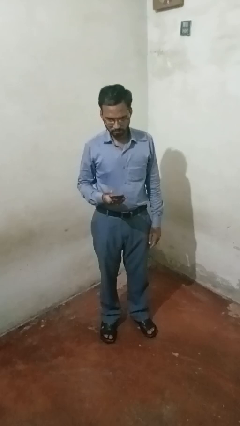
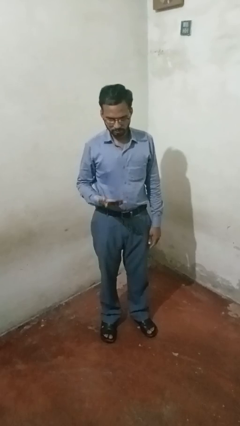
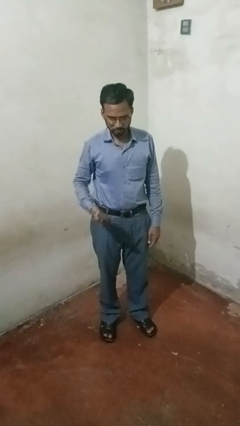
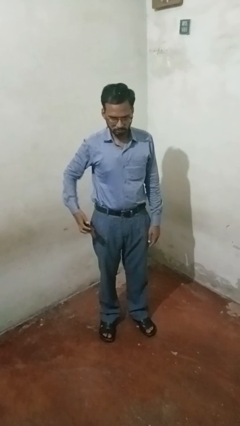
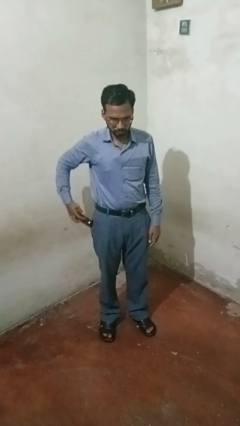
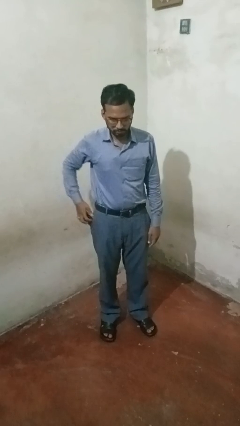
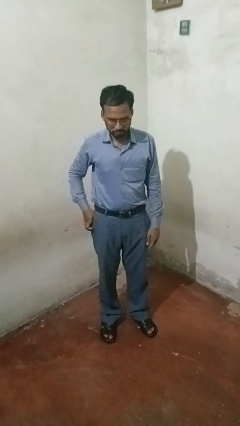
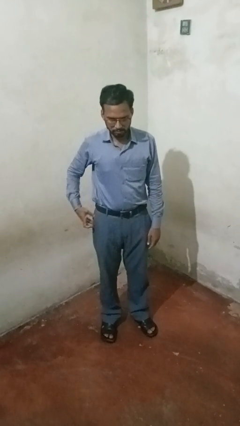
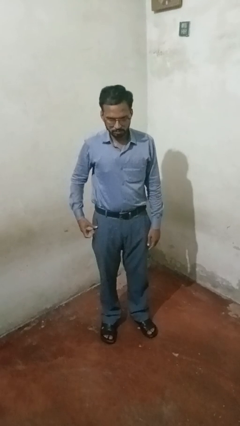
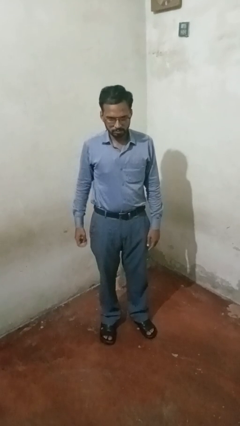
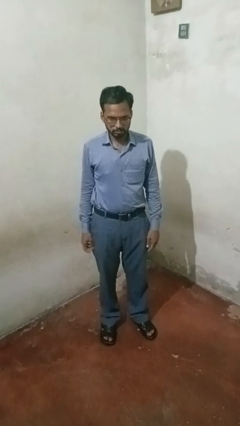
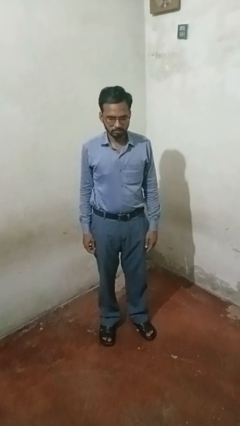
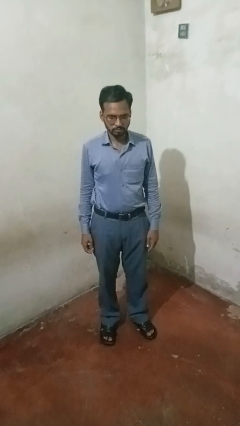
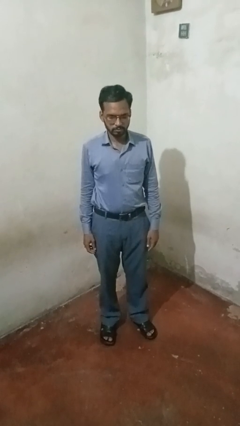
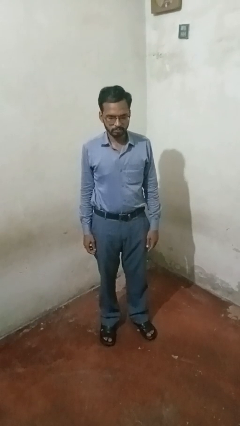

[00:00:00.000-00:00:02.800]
person puts phone into pocket

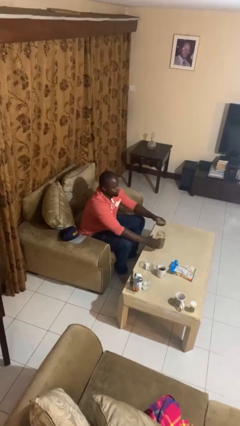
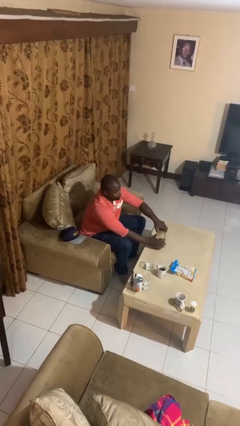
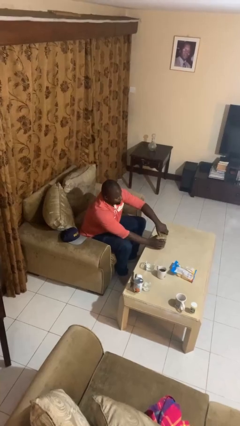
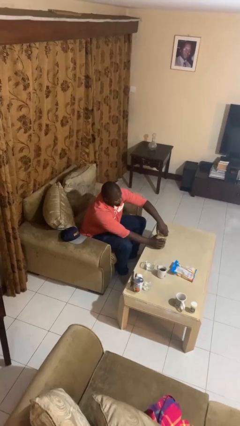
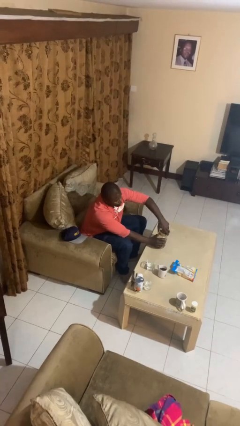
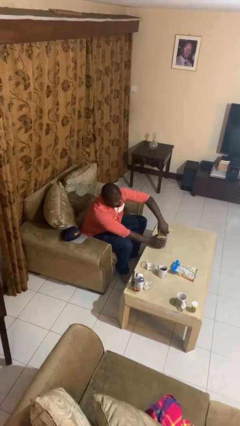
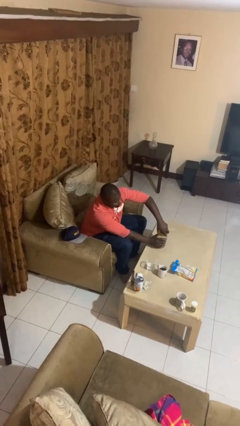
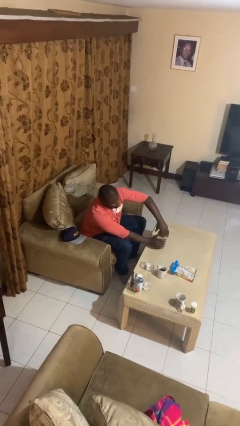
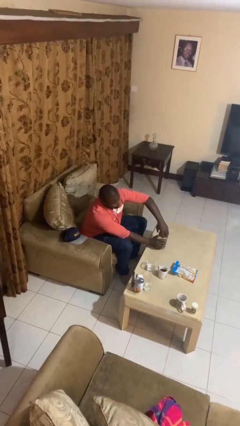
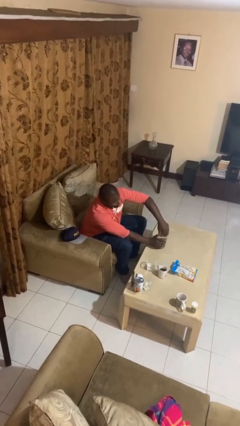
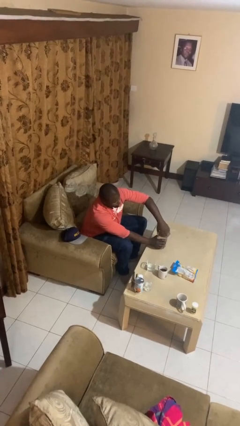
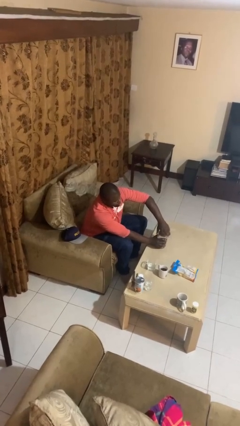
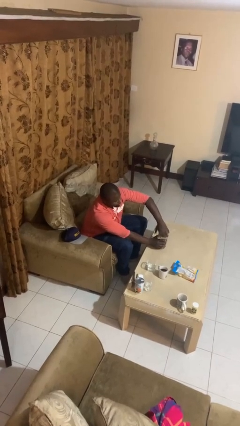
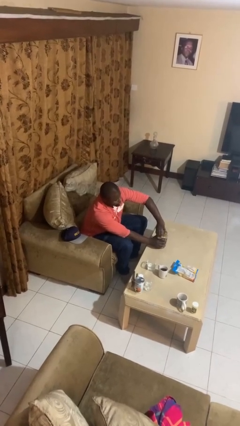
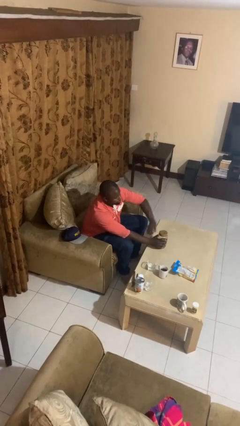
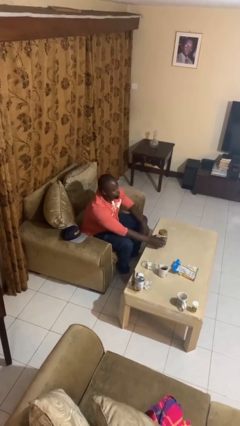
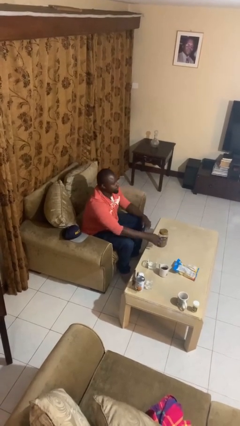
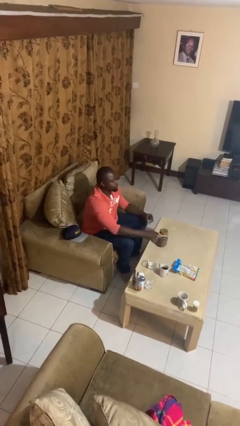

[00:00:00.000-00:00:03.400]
person closes jar

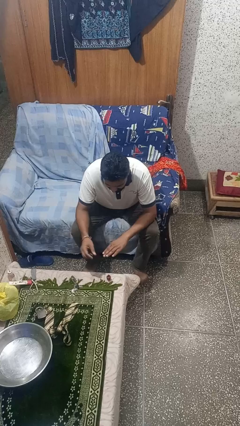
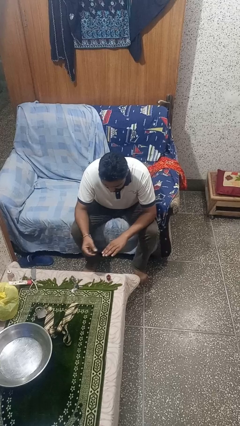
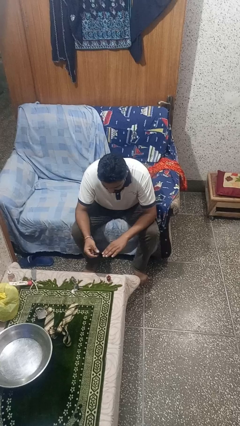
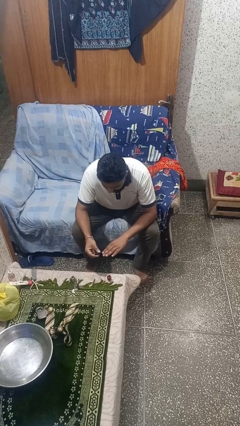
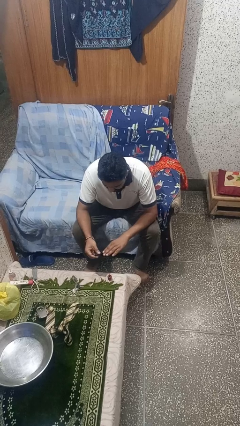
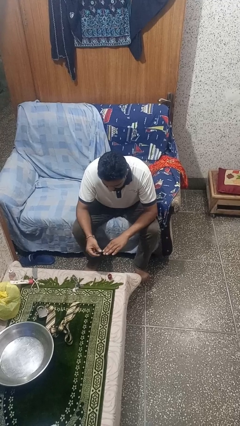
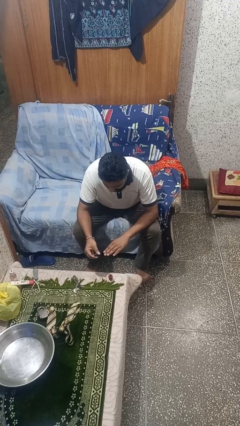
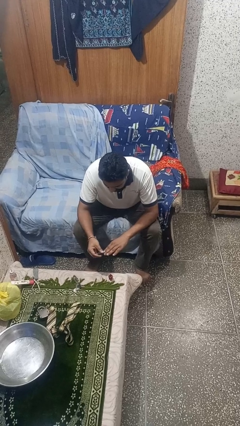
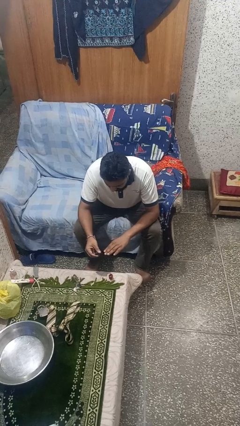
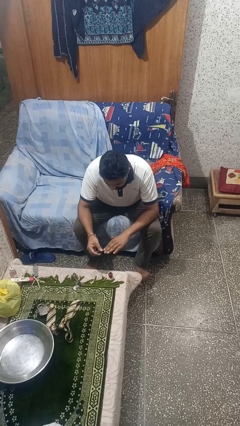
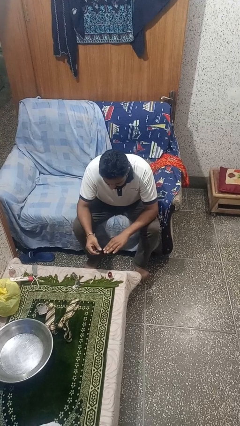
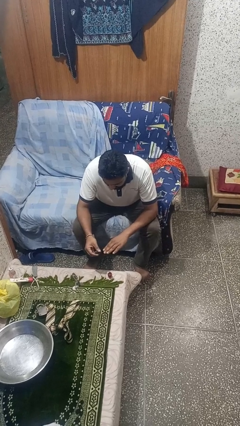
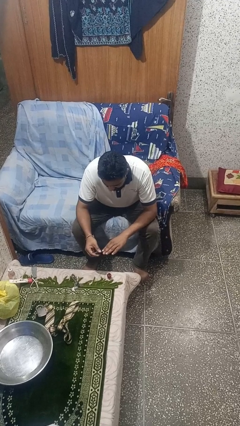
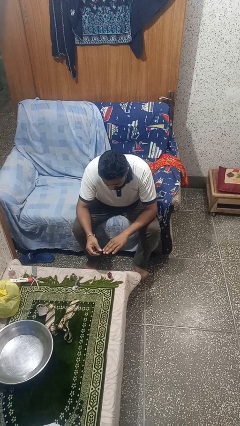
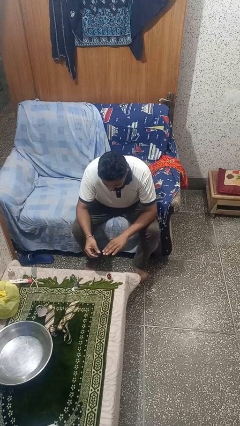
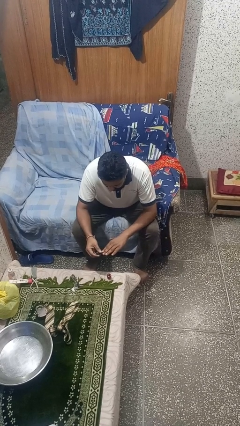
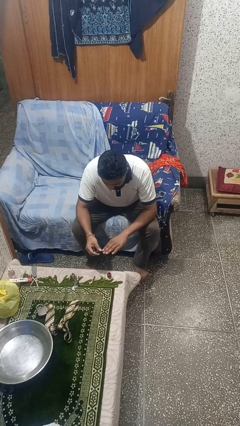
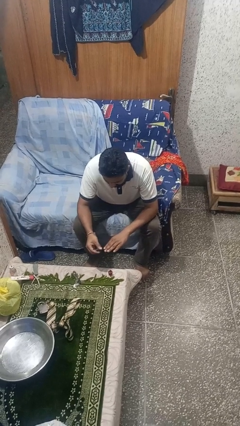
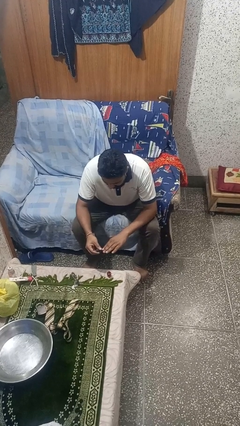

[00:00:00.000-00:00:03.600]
person paints fingernails

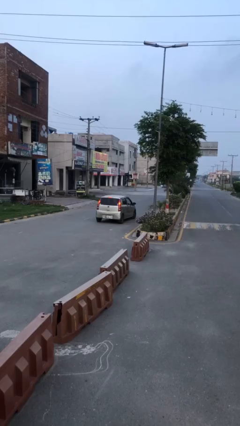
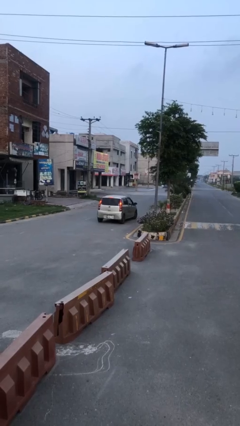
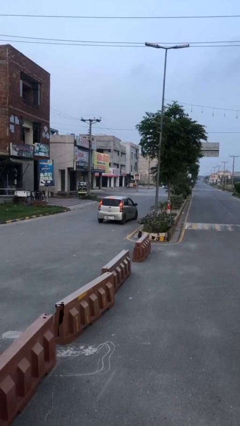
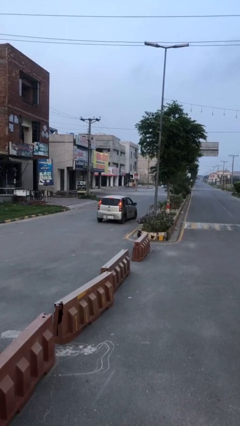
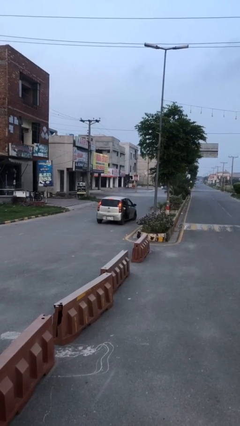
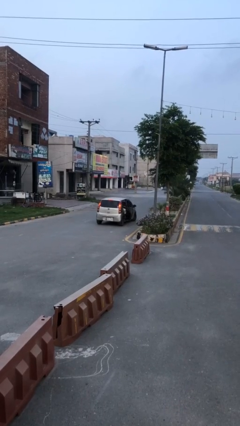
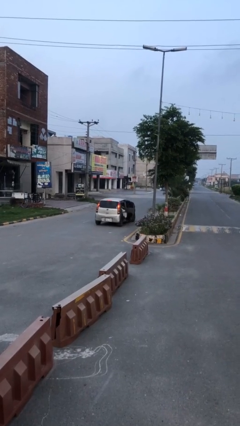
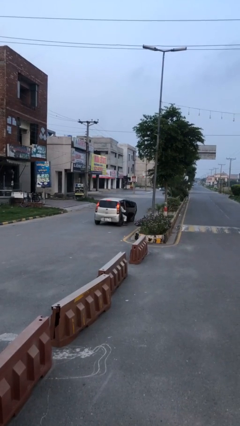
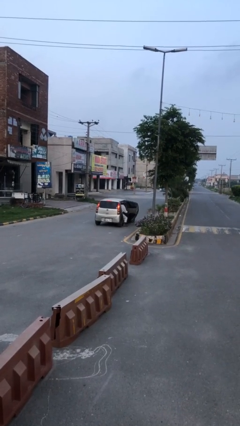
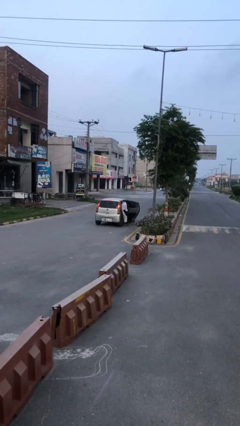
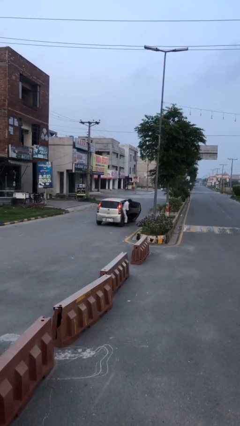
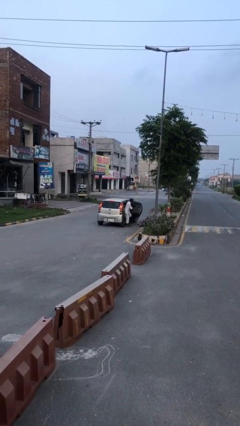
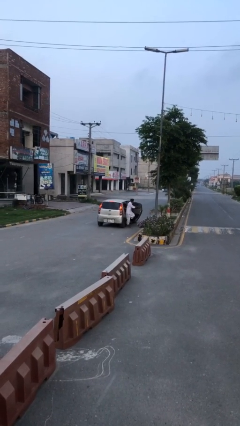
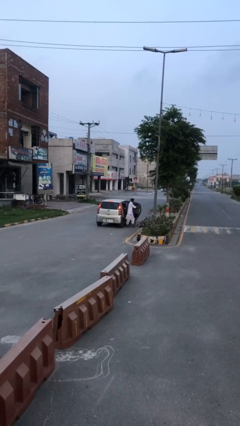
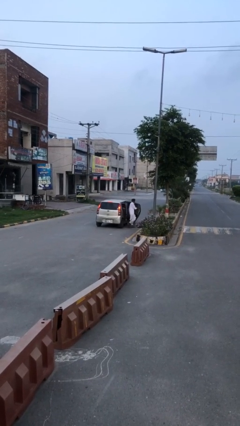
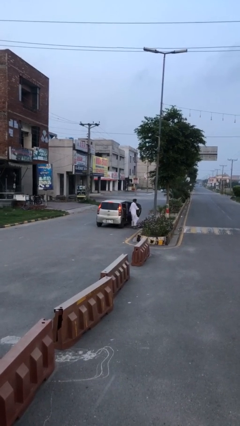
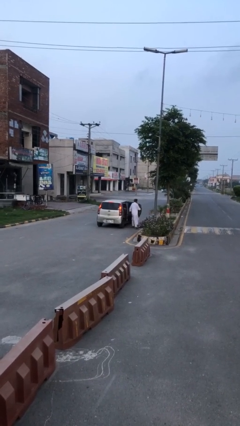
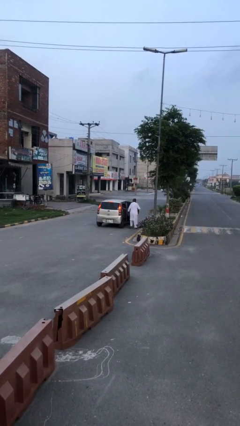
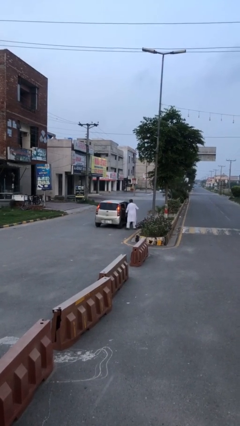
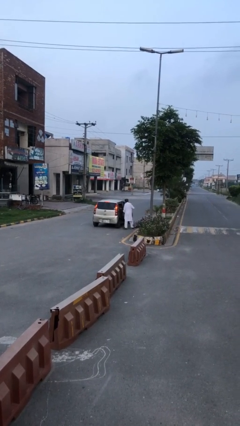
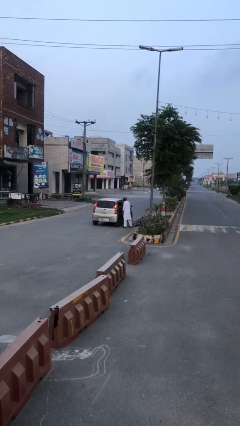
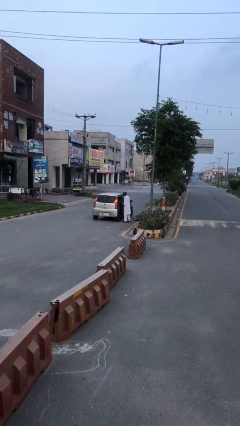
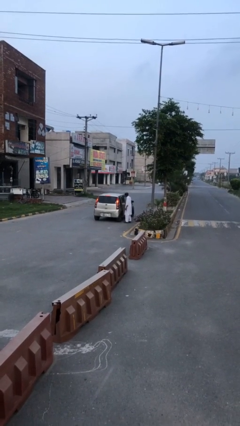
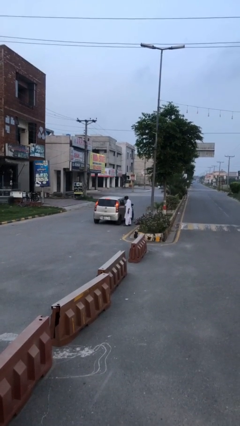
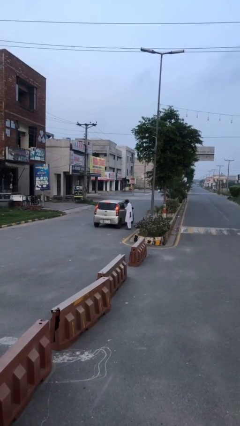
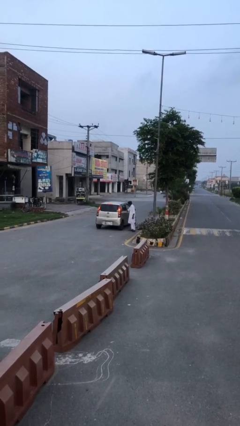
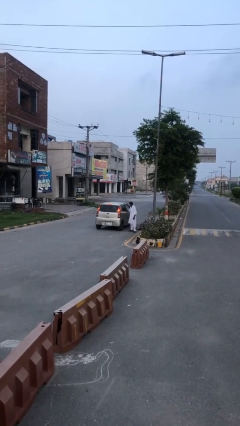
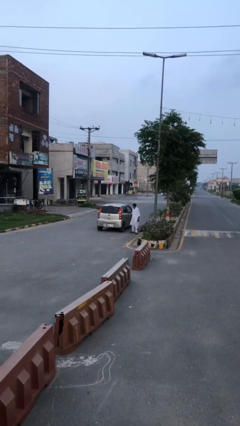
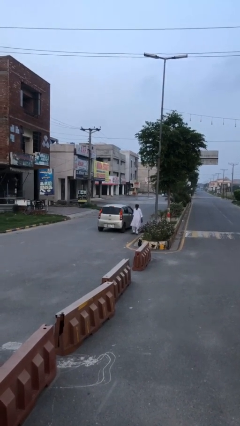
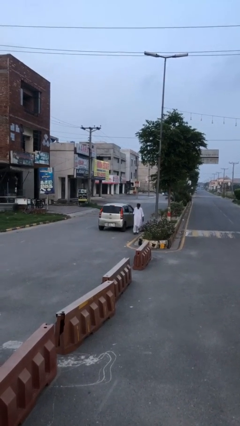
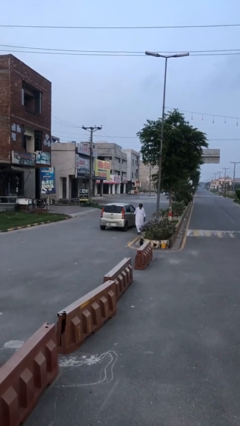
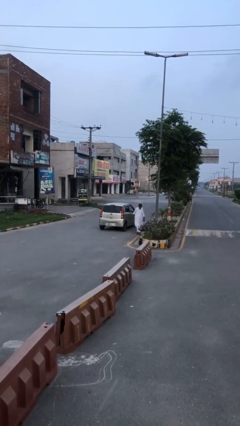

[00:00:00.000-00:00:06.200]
car drops off person

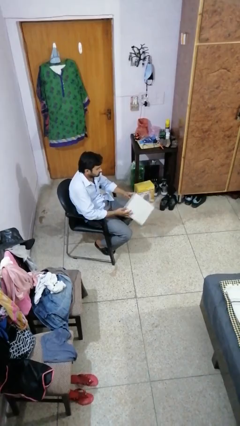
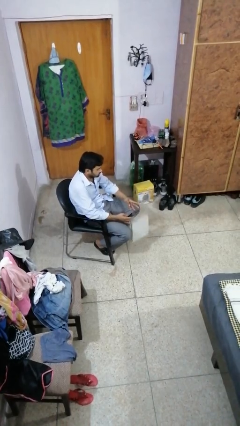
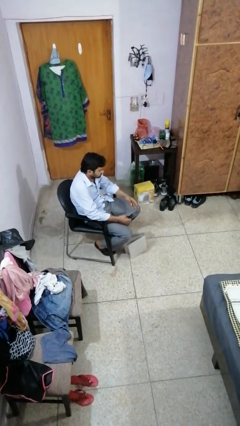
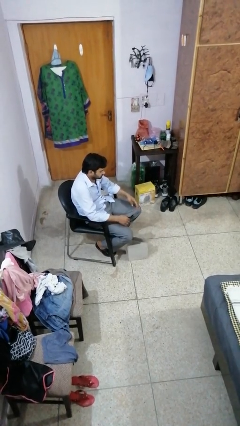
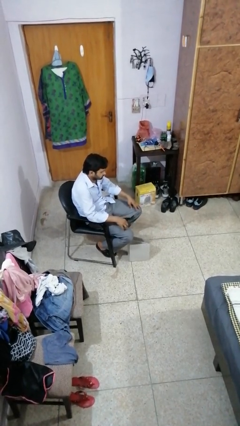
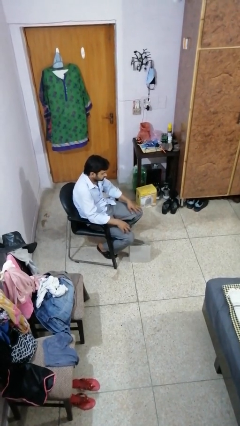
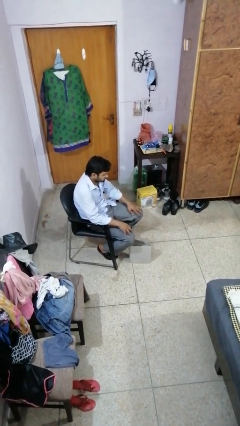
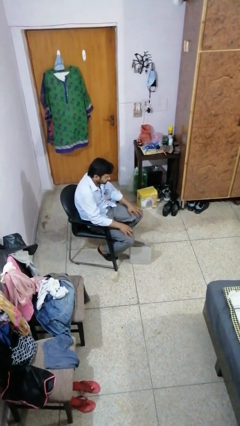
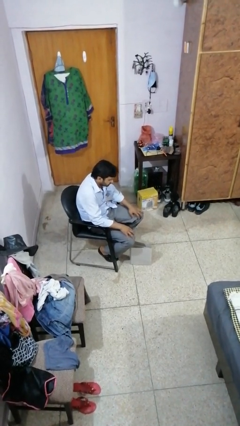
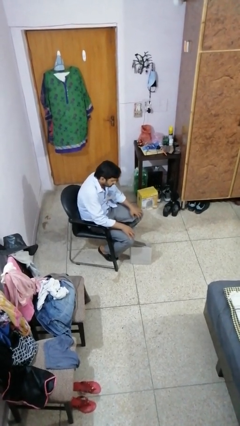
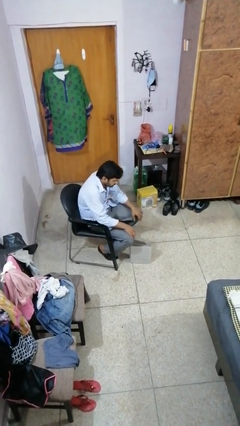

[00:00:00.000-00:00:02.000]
person drops object
